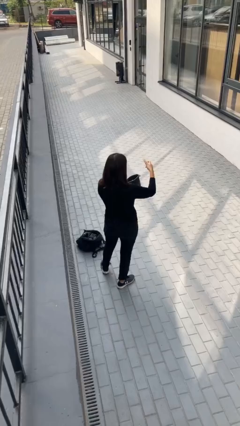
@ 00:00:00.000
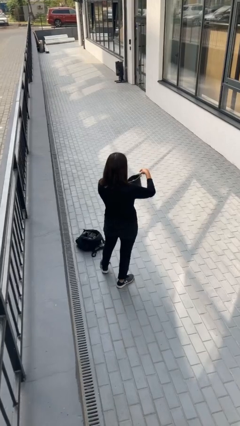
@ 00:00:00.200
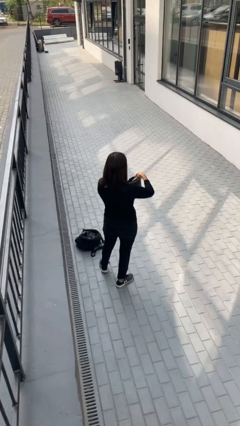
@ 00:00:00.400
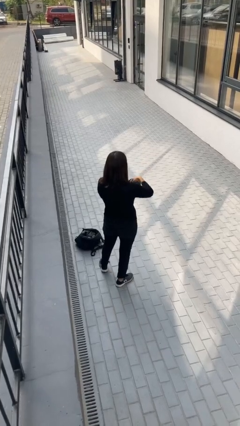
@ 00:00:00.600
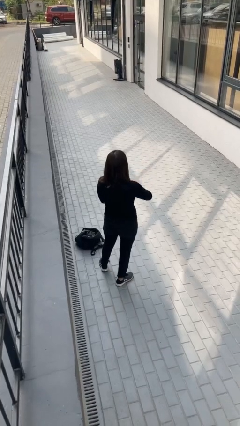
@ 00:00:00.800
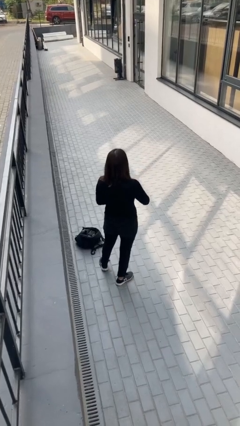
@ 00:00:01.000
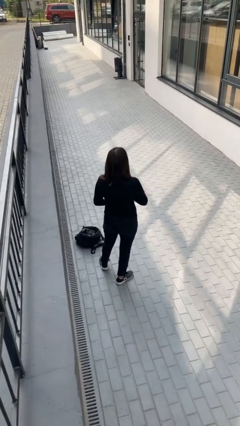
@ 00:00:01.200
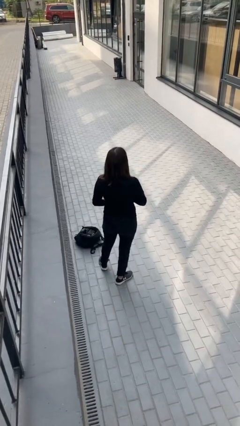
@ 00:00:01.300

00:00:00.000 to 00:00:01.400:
person puts object into purse

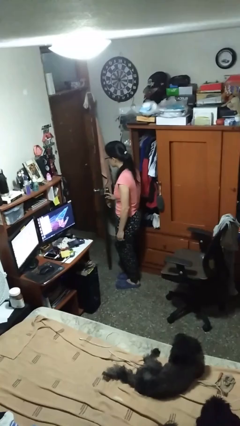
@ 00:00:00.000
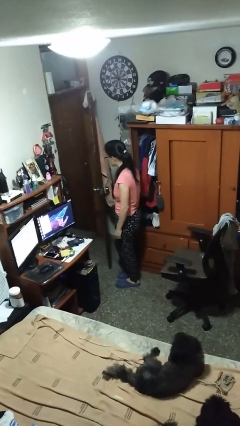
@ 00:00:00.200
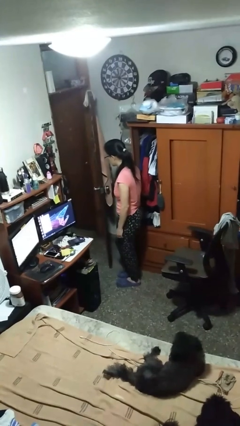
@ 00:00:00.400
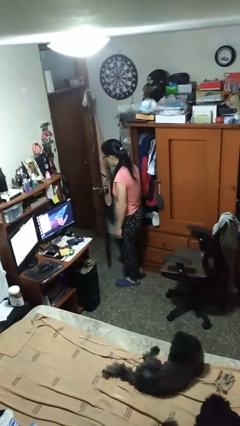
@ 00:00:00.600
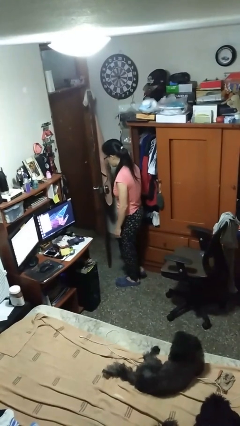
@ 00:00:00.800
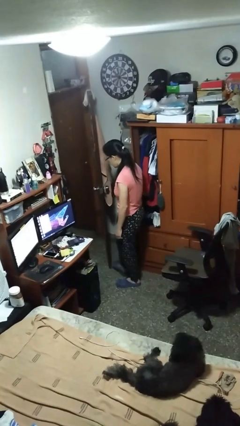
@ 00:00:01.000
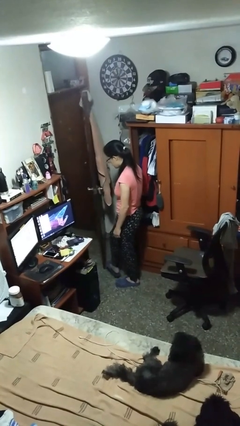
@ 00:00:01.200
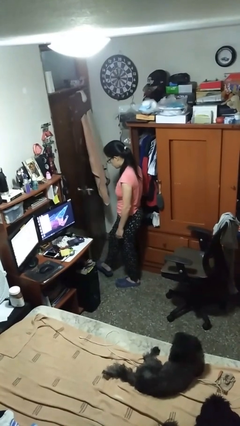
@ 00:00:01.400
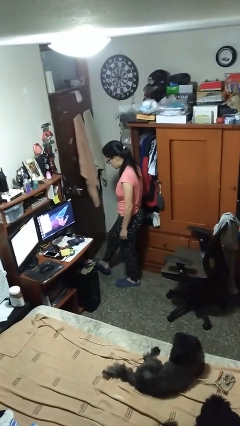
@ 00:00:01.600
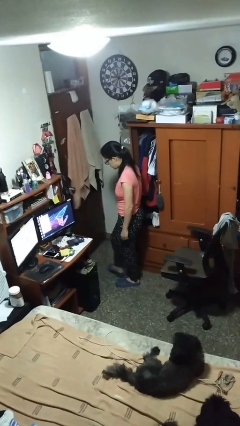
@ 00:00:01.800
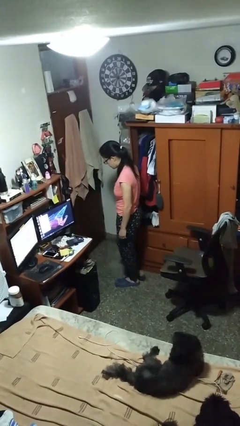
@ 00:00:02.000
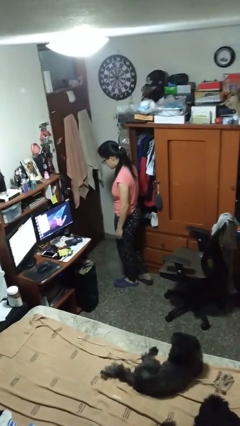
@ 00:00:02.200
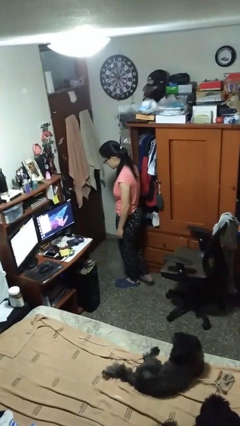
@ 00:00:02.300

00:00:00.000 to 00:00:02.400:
person closes door with foot

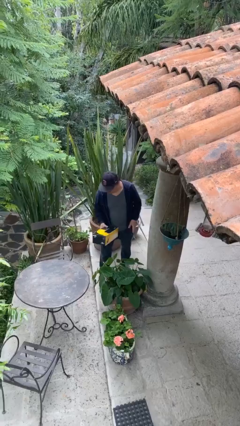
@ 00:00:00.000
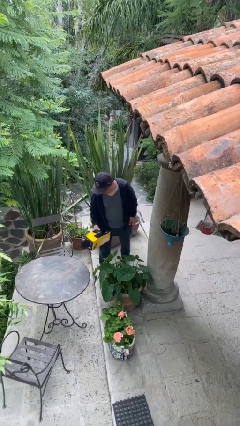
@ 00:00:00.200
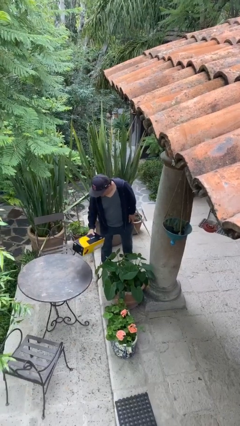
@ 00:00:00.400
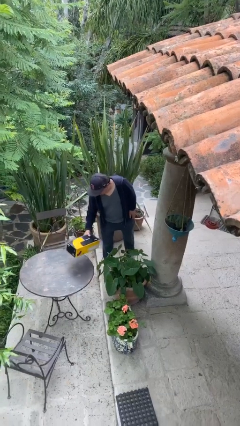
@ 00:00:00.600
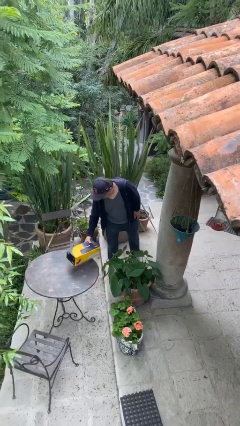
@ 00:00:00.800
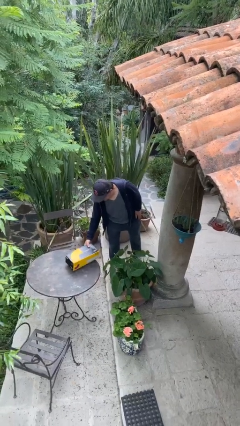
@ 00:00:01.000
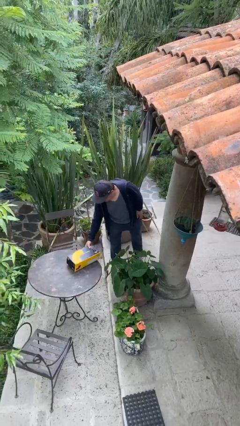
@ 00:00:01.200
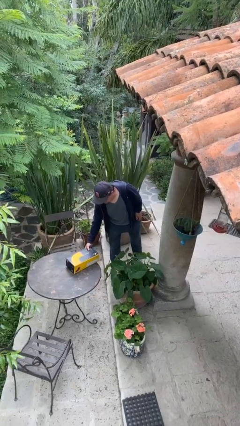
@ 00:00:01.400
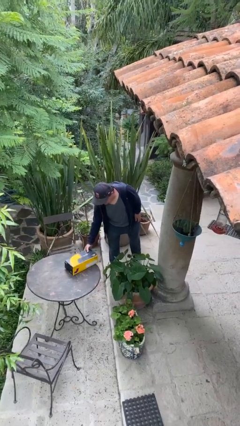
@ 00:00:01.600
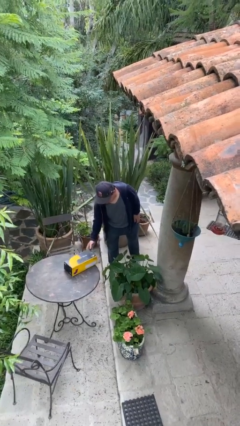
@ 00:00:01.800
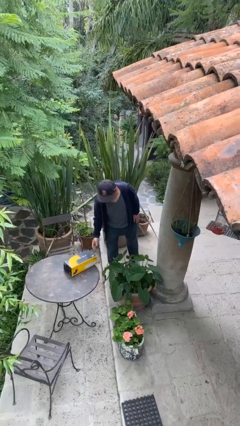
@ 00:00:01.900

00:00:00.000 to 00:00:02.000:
person puts down object on table

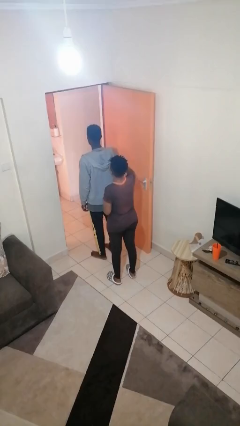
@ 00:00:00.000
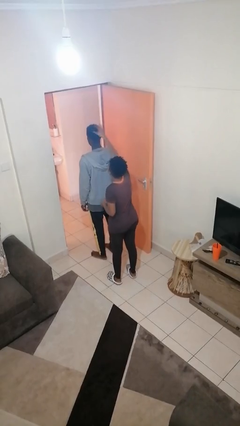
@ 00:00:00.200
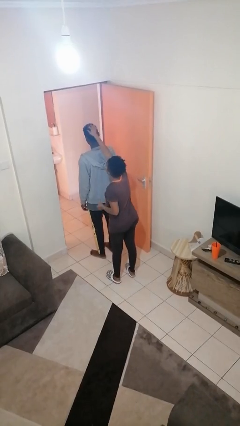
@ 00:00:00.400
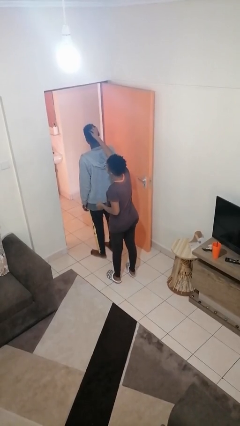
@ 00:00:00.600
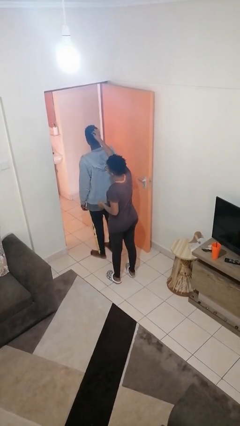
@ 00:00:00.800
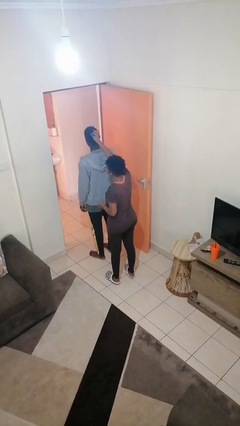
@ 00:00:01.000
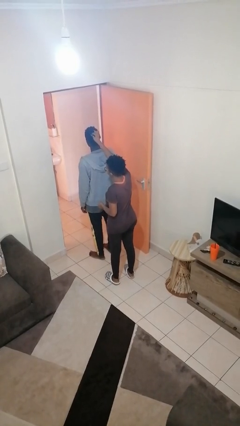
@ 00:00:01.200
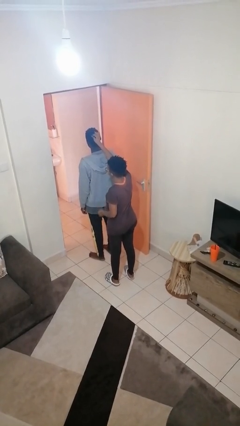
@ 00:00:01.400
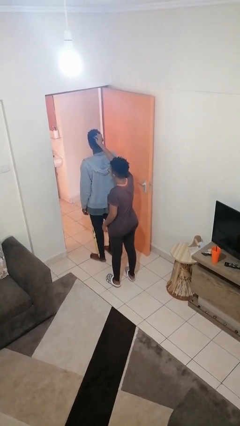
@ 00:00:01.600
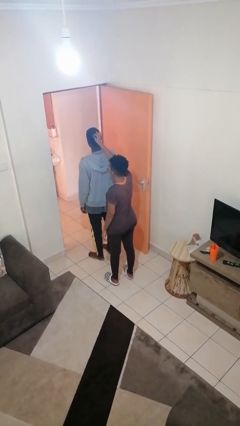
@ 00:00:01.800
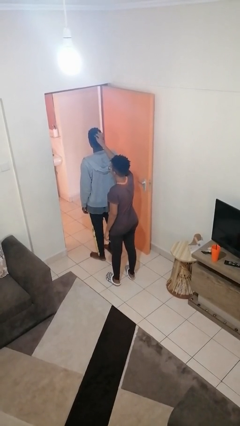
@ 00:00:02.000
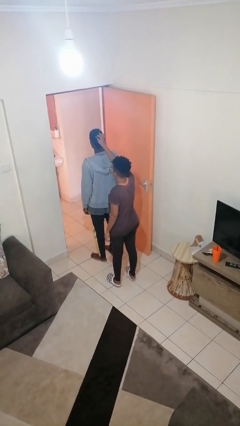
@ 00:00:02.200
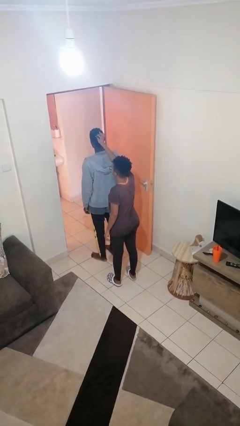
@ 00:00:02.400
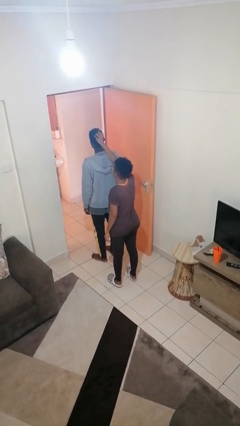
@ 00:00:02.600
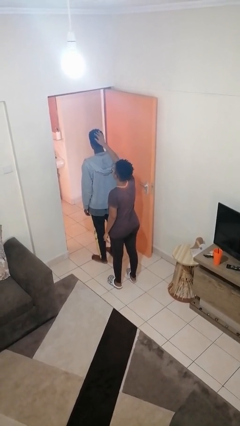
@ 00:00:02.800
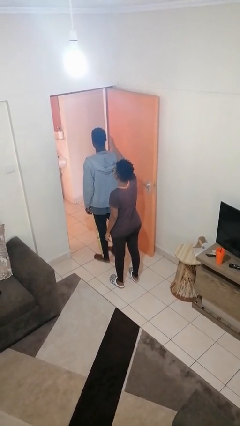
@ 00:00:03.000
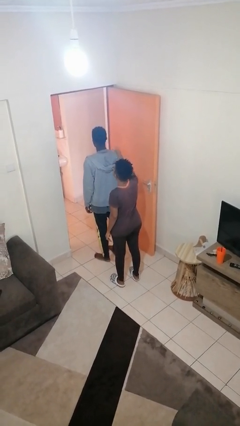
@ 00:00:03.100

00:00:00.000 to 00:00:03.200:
person grabs person by hair

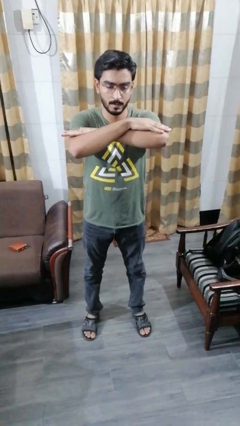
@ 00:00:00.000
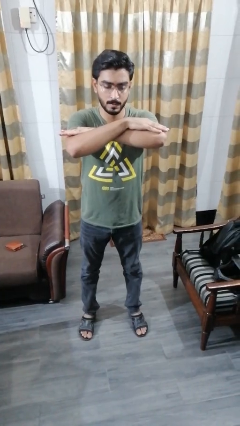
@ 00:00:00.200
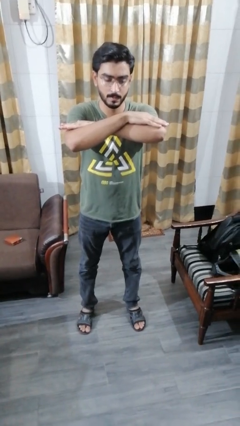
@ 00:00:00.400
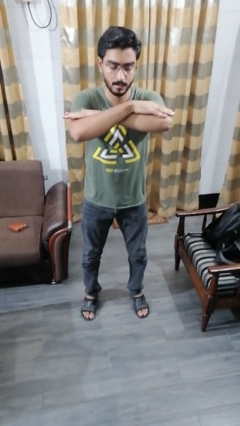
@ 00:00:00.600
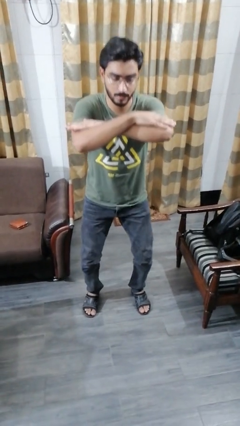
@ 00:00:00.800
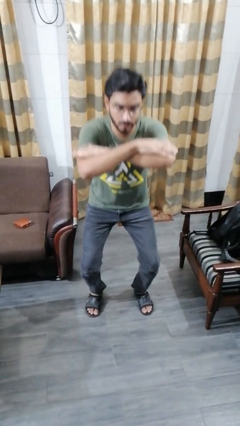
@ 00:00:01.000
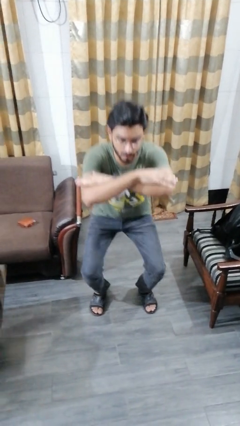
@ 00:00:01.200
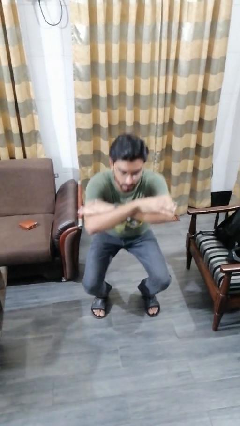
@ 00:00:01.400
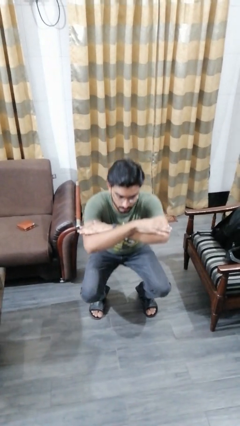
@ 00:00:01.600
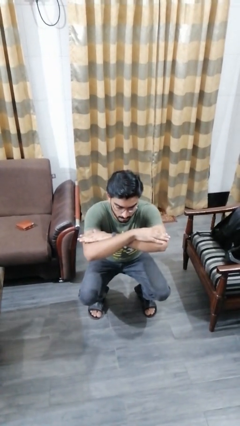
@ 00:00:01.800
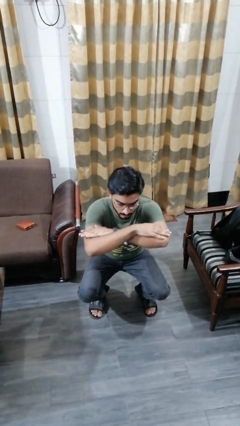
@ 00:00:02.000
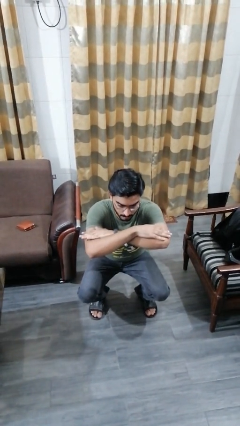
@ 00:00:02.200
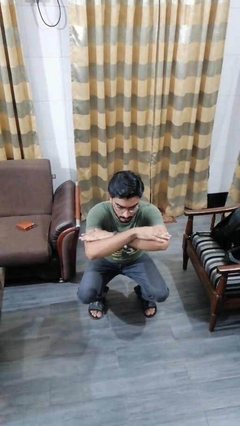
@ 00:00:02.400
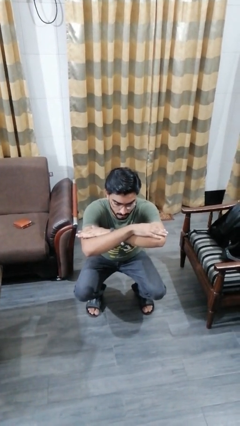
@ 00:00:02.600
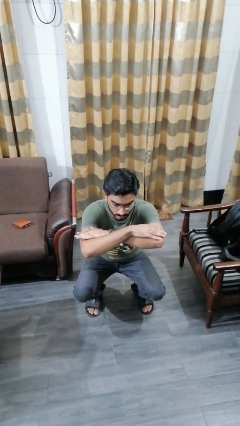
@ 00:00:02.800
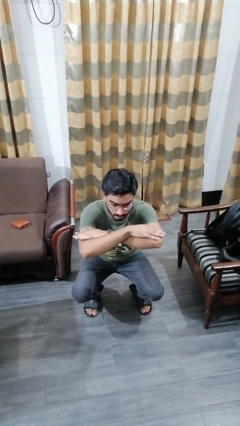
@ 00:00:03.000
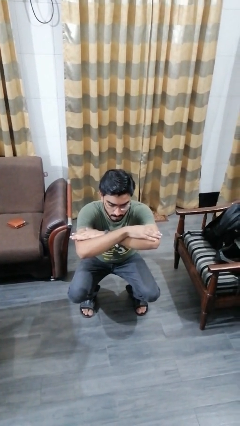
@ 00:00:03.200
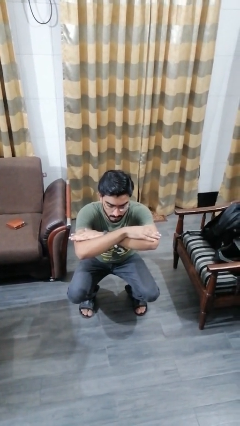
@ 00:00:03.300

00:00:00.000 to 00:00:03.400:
person squats

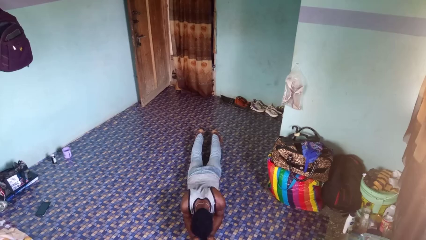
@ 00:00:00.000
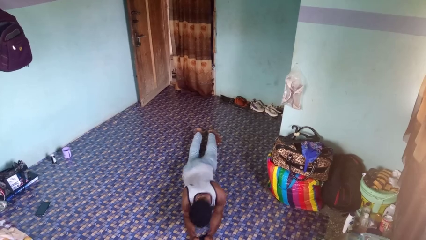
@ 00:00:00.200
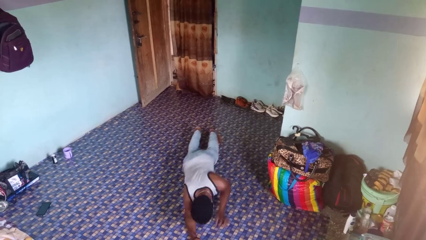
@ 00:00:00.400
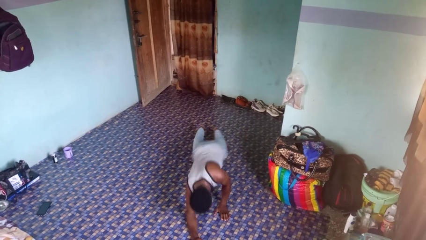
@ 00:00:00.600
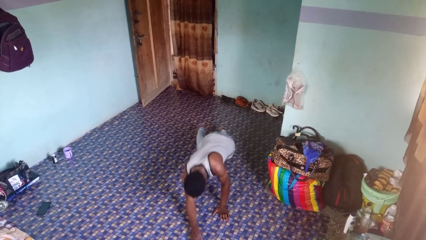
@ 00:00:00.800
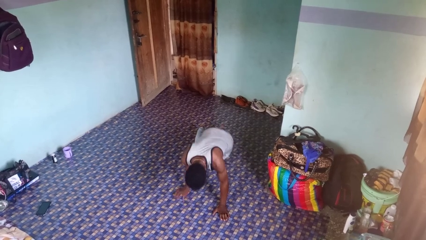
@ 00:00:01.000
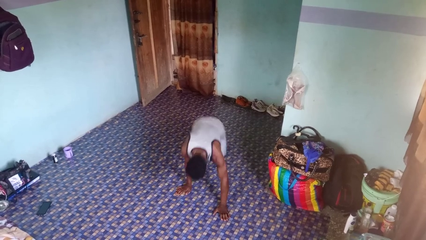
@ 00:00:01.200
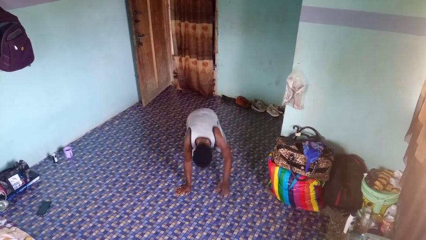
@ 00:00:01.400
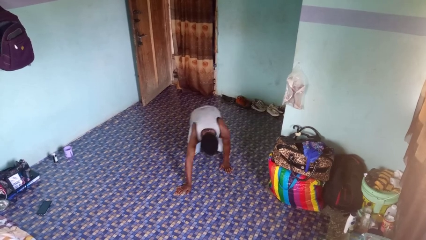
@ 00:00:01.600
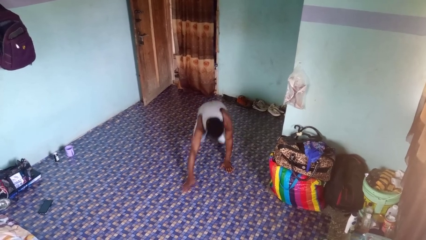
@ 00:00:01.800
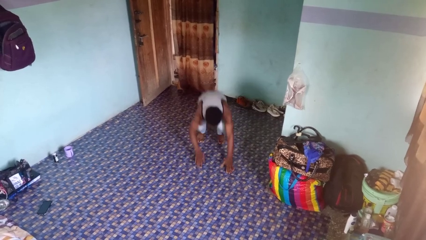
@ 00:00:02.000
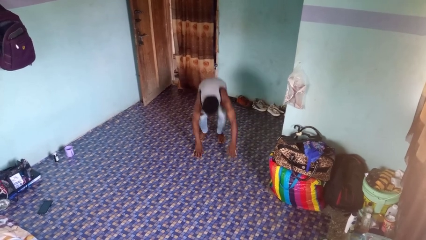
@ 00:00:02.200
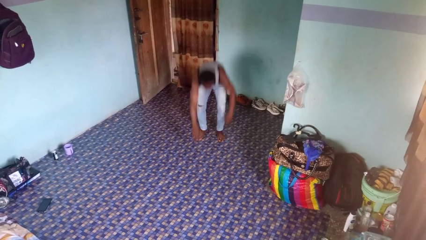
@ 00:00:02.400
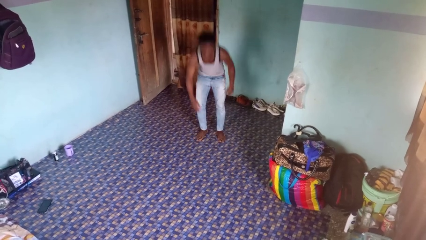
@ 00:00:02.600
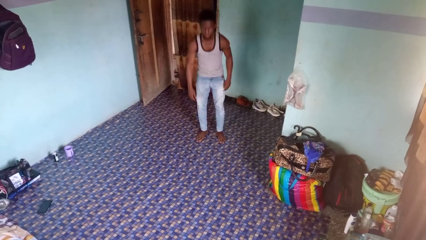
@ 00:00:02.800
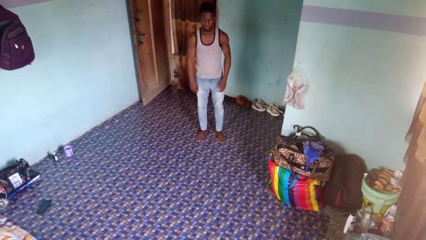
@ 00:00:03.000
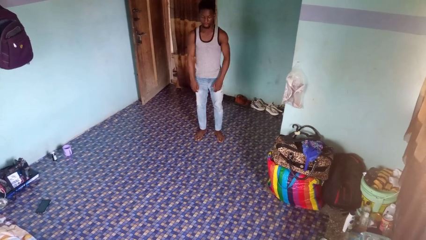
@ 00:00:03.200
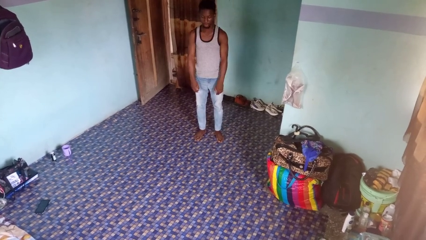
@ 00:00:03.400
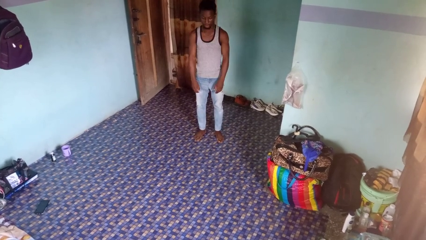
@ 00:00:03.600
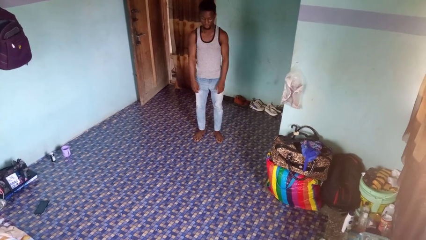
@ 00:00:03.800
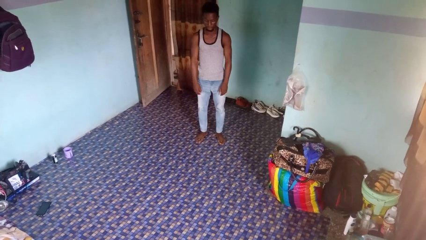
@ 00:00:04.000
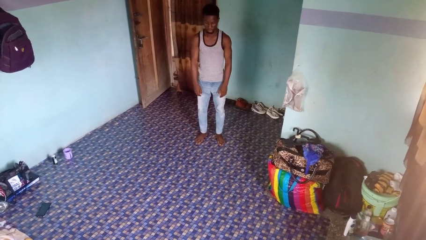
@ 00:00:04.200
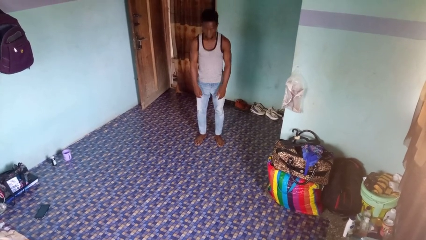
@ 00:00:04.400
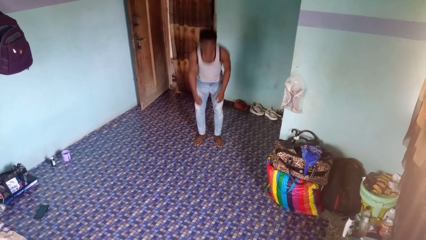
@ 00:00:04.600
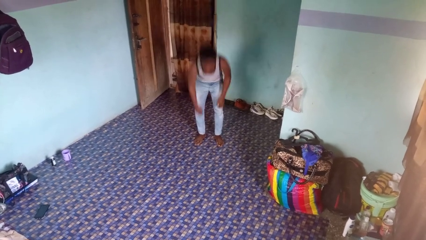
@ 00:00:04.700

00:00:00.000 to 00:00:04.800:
person stands up from floor
